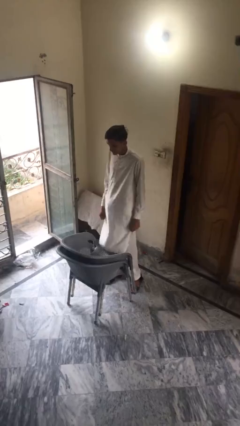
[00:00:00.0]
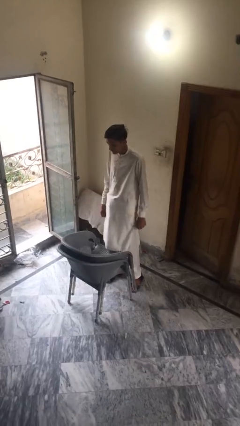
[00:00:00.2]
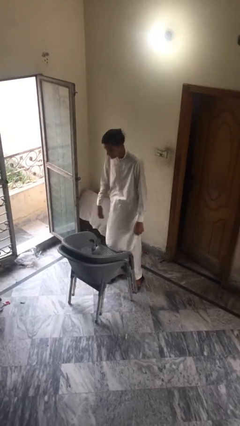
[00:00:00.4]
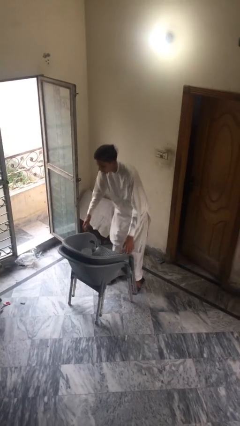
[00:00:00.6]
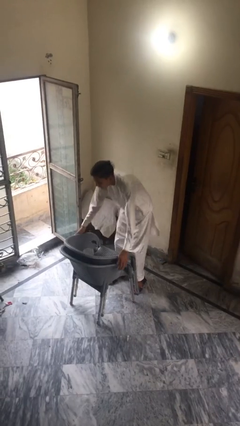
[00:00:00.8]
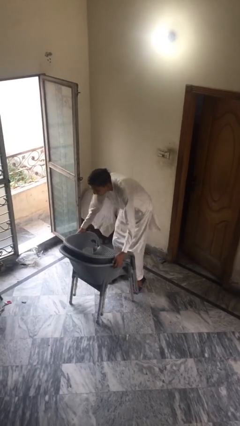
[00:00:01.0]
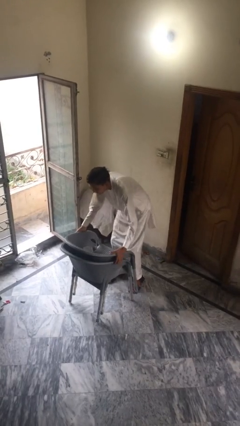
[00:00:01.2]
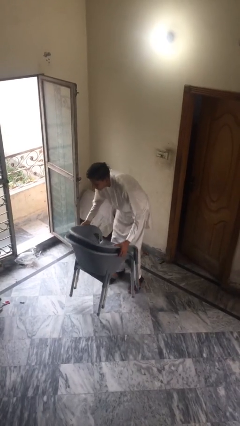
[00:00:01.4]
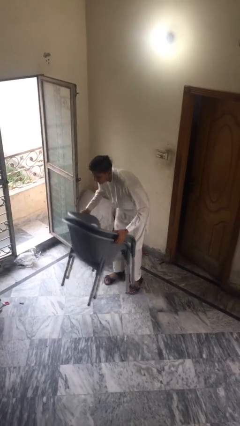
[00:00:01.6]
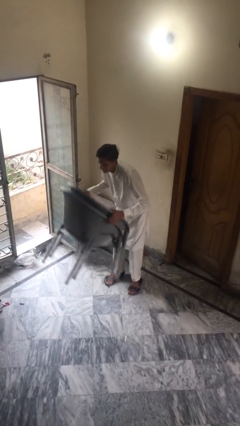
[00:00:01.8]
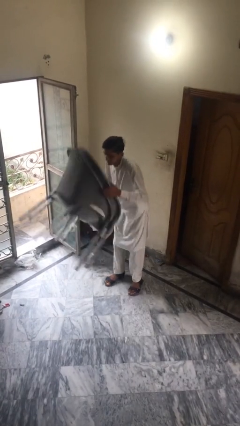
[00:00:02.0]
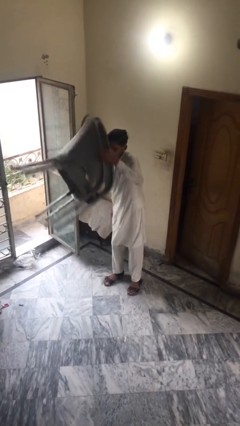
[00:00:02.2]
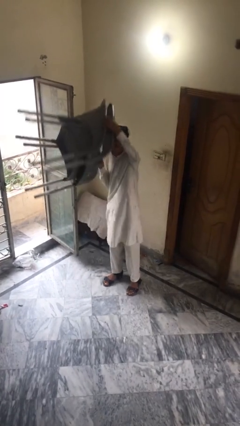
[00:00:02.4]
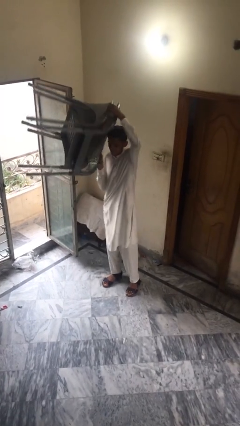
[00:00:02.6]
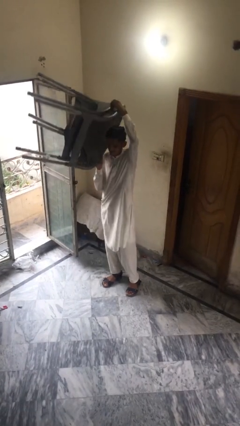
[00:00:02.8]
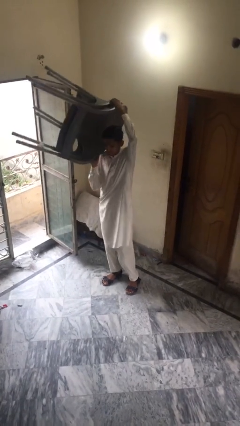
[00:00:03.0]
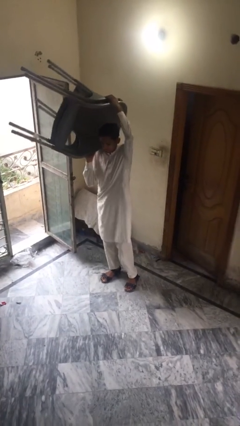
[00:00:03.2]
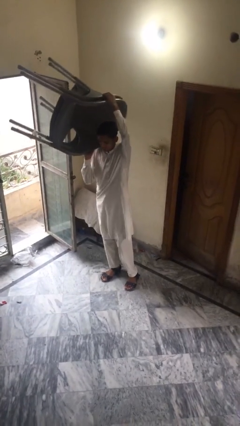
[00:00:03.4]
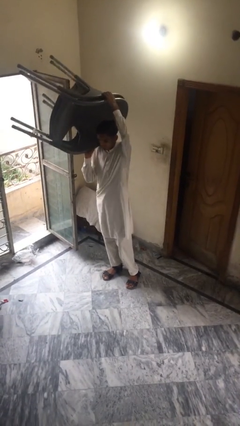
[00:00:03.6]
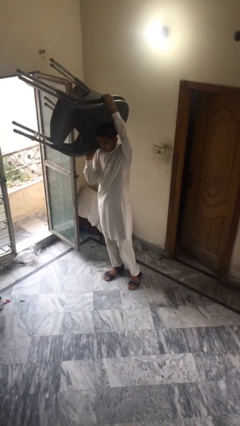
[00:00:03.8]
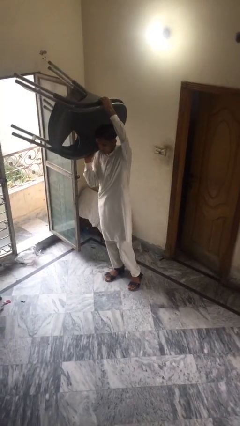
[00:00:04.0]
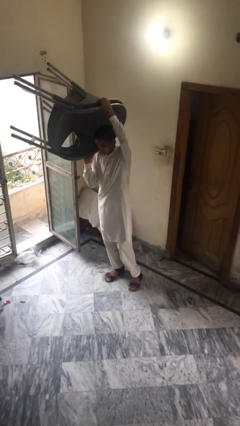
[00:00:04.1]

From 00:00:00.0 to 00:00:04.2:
person picks up object from floor

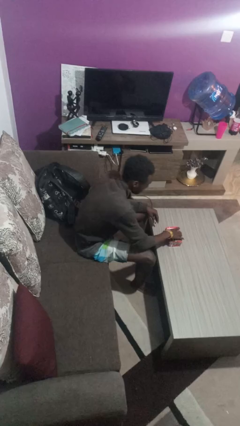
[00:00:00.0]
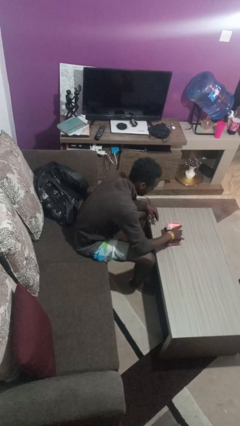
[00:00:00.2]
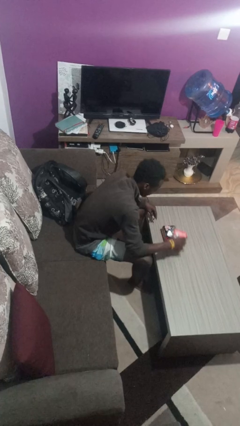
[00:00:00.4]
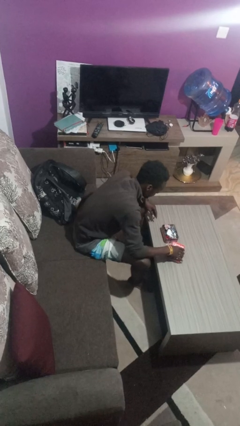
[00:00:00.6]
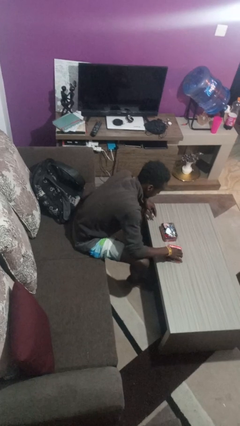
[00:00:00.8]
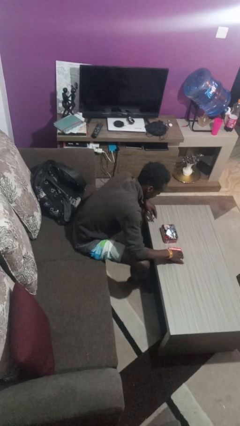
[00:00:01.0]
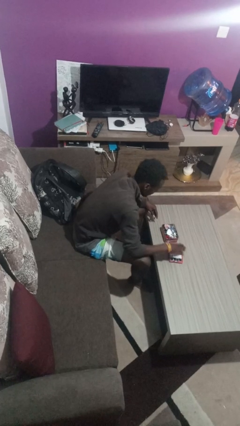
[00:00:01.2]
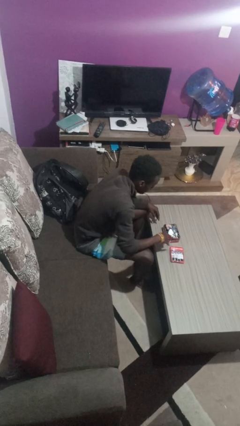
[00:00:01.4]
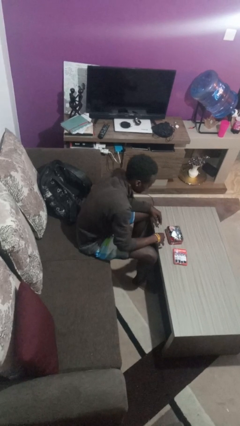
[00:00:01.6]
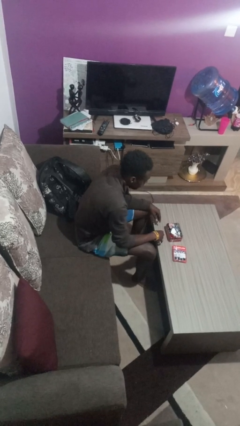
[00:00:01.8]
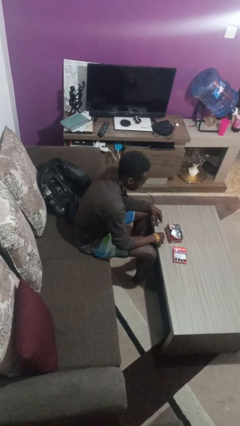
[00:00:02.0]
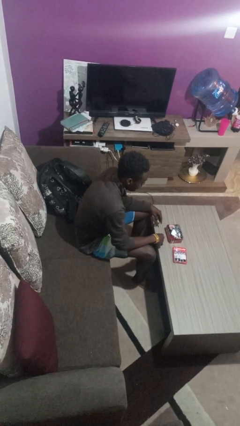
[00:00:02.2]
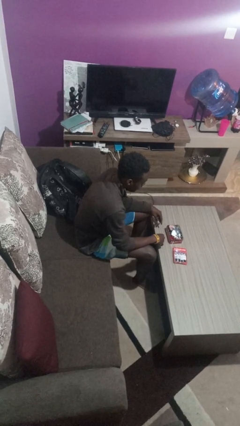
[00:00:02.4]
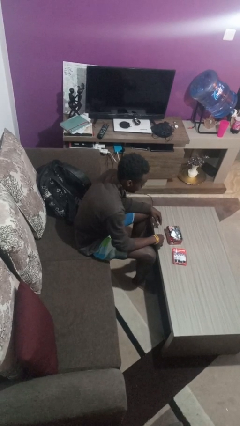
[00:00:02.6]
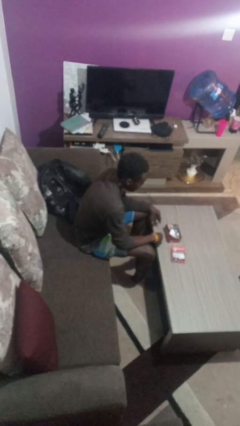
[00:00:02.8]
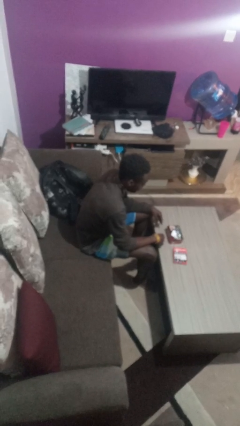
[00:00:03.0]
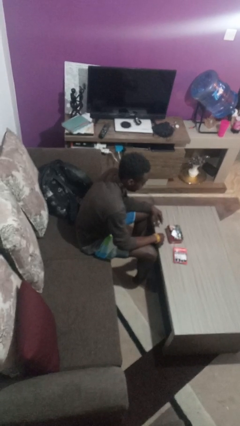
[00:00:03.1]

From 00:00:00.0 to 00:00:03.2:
person opens jewelry box

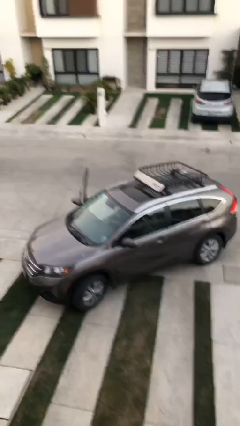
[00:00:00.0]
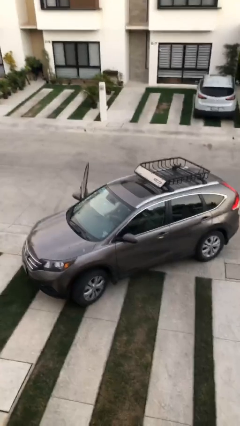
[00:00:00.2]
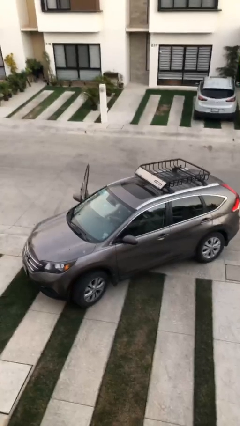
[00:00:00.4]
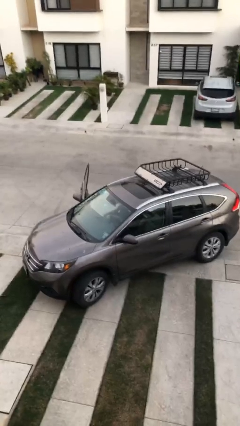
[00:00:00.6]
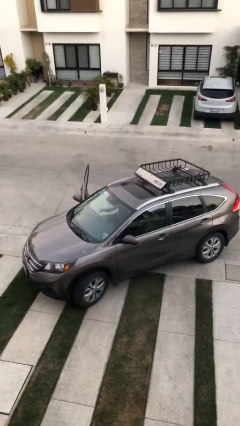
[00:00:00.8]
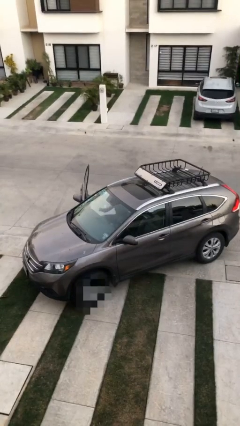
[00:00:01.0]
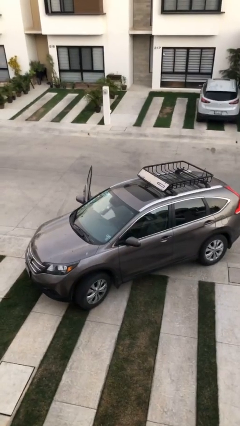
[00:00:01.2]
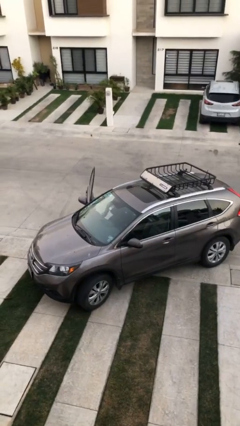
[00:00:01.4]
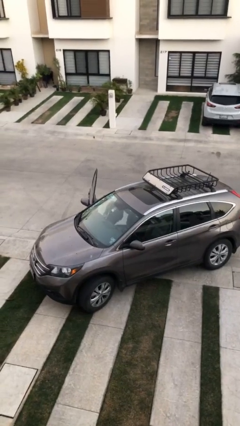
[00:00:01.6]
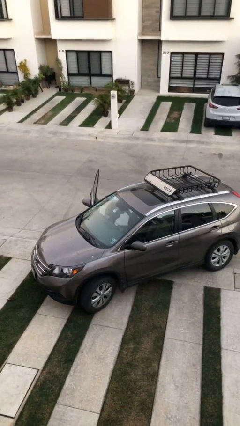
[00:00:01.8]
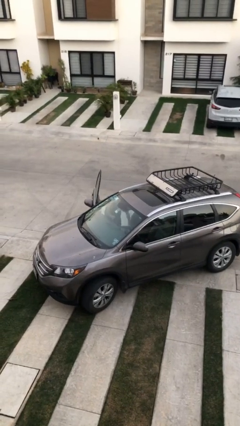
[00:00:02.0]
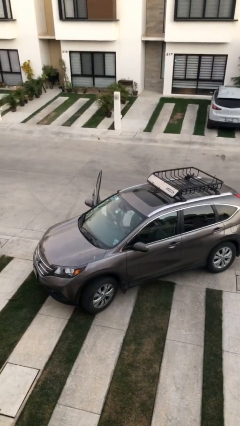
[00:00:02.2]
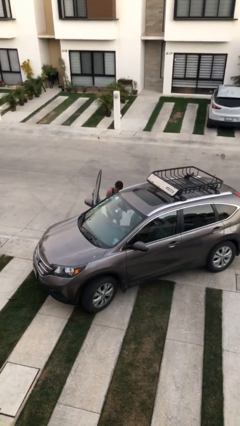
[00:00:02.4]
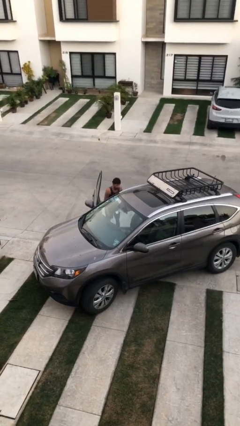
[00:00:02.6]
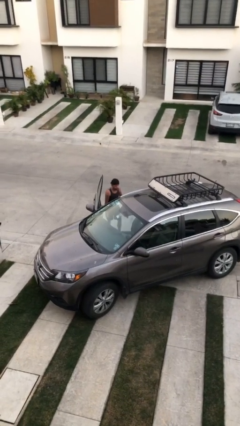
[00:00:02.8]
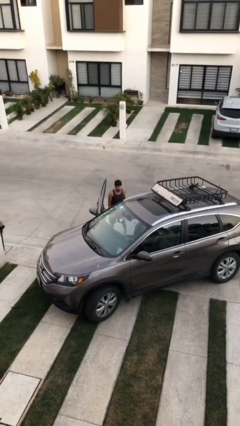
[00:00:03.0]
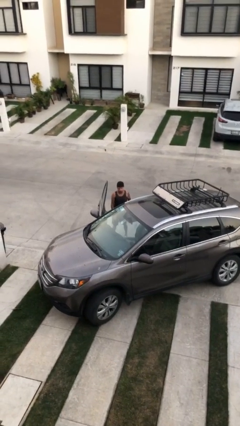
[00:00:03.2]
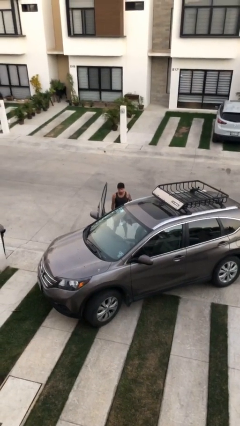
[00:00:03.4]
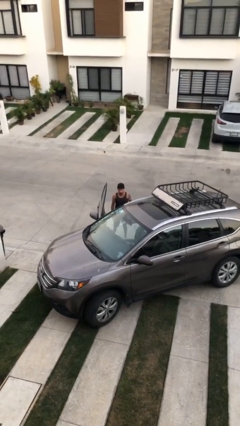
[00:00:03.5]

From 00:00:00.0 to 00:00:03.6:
person exits car

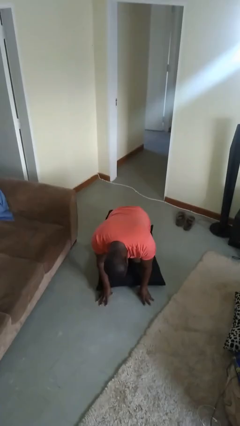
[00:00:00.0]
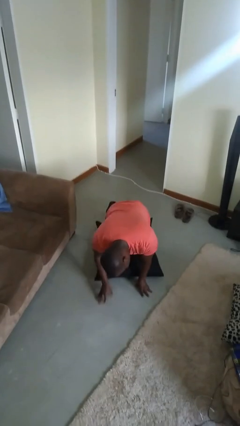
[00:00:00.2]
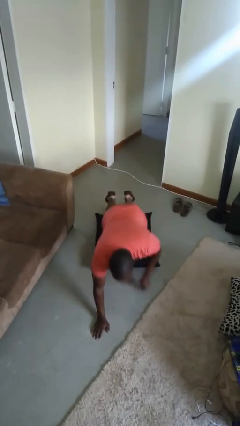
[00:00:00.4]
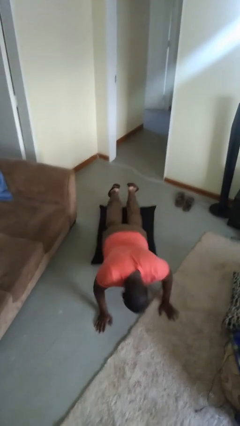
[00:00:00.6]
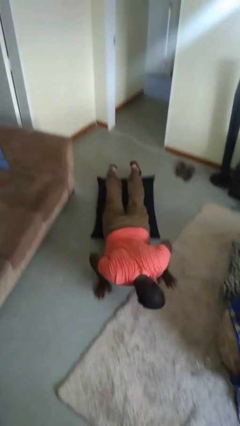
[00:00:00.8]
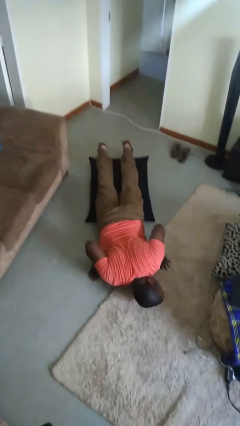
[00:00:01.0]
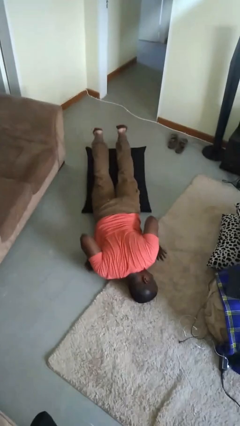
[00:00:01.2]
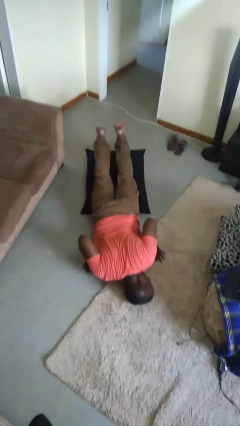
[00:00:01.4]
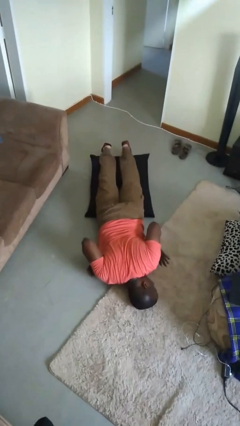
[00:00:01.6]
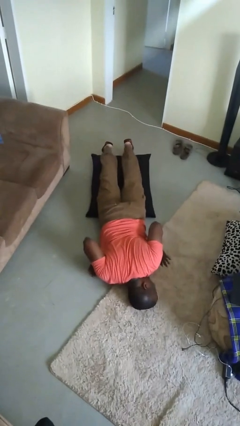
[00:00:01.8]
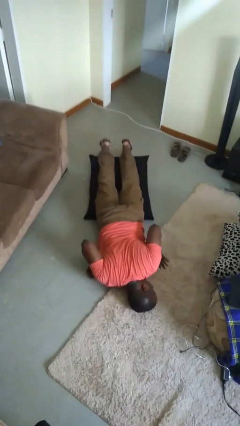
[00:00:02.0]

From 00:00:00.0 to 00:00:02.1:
person lies down on floor

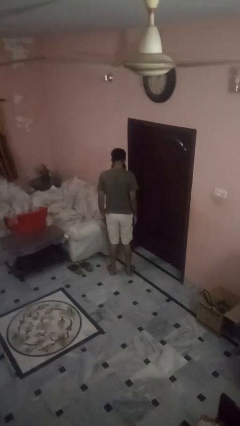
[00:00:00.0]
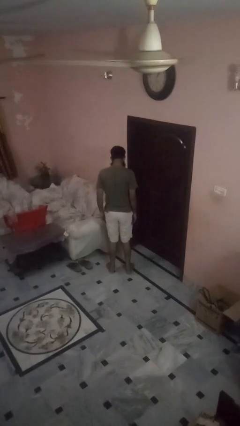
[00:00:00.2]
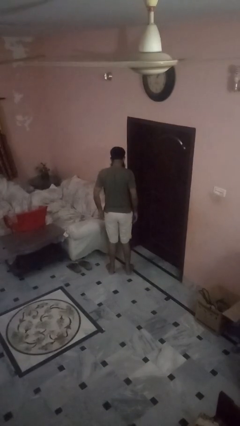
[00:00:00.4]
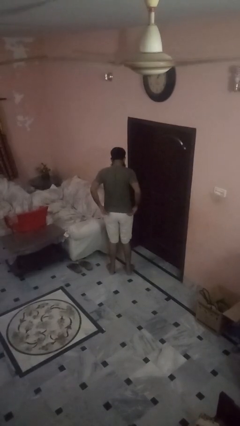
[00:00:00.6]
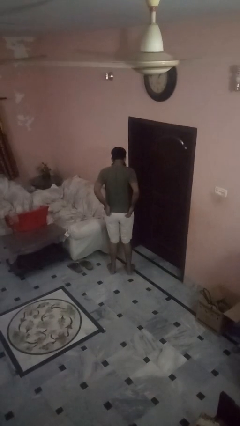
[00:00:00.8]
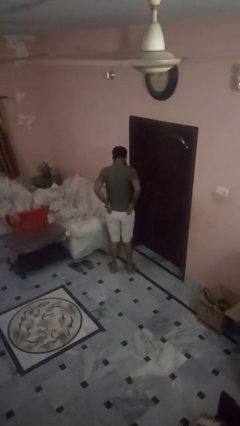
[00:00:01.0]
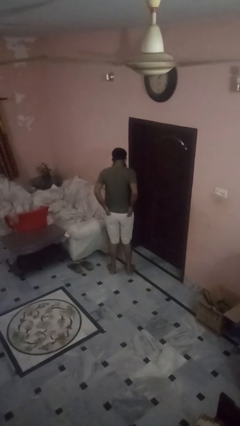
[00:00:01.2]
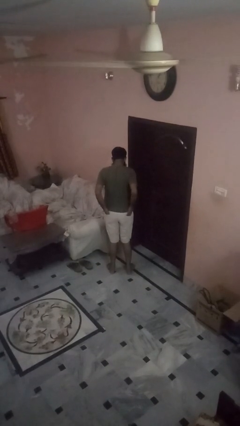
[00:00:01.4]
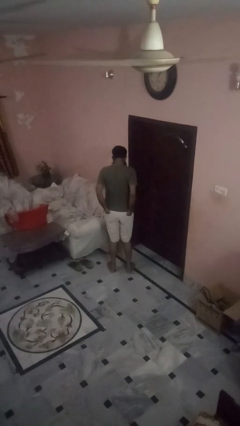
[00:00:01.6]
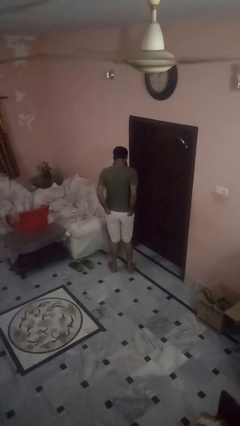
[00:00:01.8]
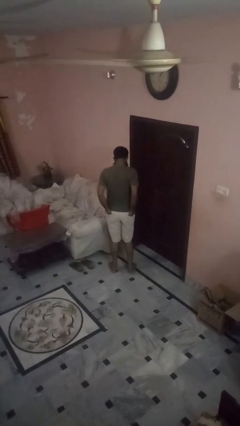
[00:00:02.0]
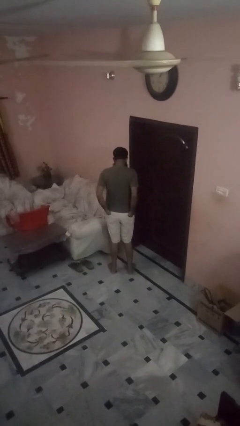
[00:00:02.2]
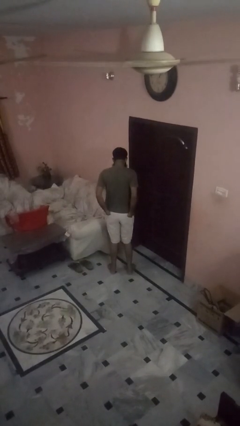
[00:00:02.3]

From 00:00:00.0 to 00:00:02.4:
person puts hands in back pockets

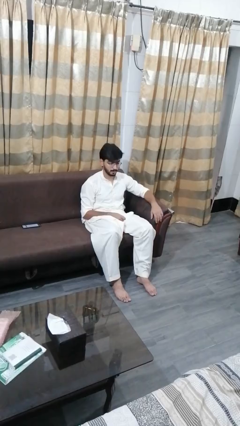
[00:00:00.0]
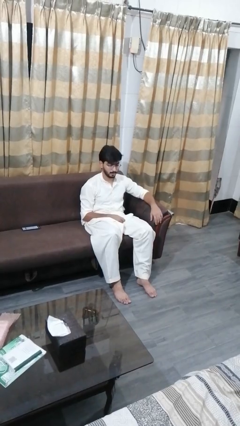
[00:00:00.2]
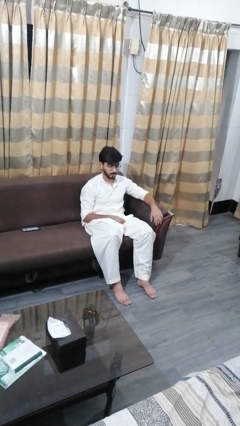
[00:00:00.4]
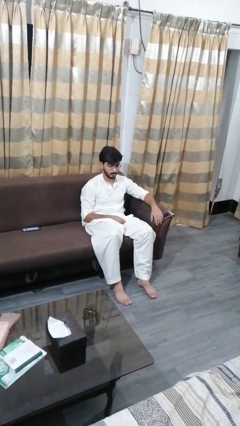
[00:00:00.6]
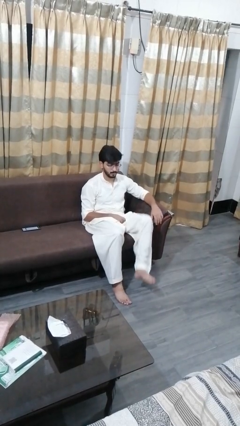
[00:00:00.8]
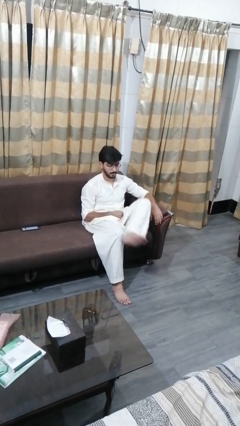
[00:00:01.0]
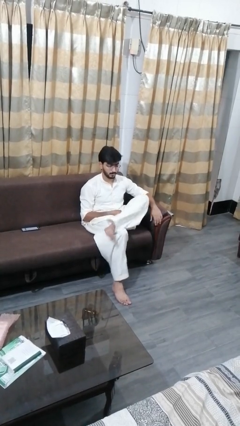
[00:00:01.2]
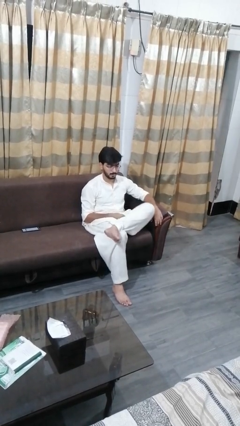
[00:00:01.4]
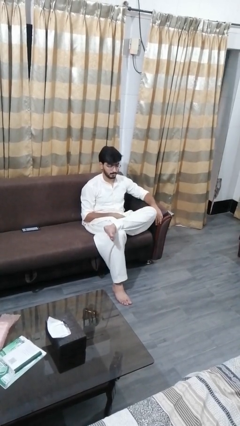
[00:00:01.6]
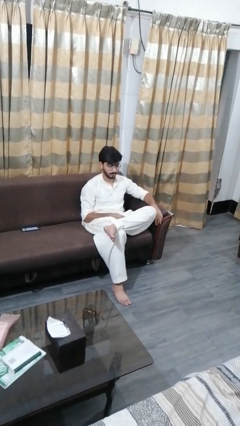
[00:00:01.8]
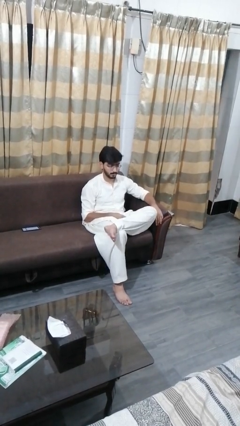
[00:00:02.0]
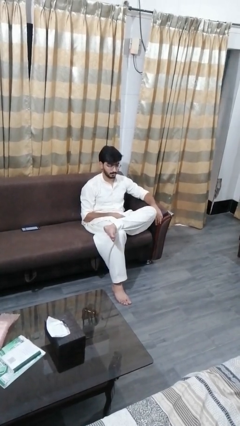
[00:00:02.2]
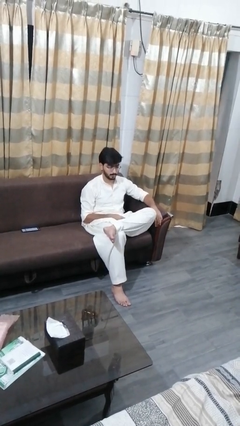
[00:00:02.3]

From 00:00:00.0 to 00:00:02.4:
person crosses legs
